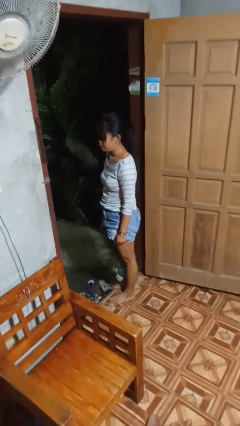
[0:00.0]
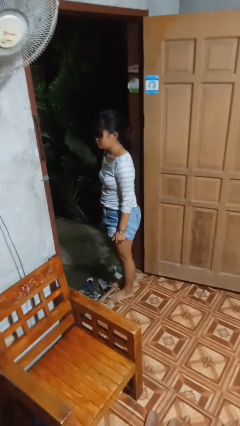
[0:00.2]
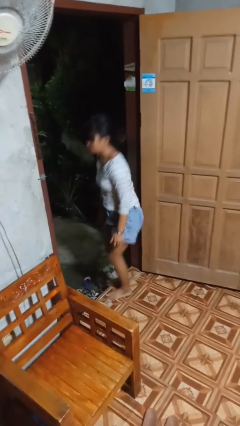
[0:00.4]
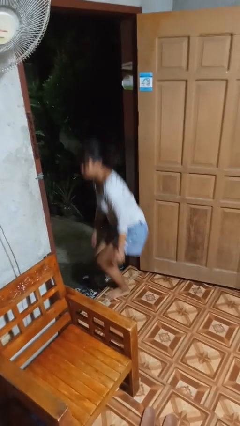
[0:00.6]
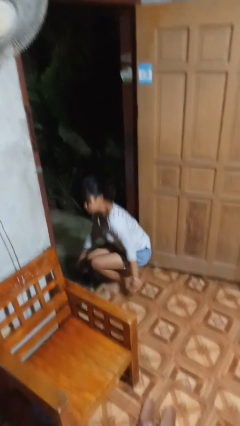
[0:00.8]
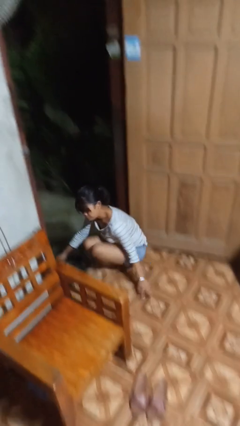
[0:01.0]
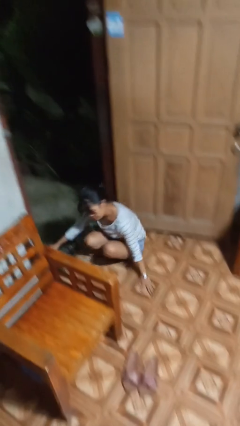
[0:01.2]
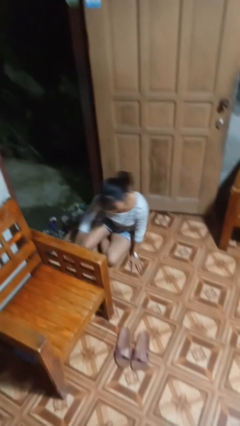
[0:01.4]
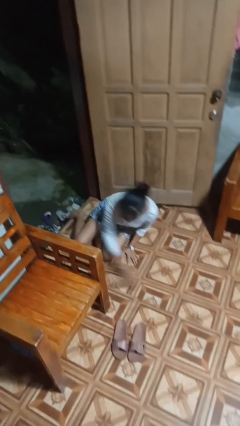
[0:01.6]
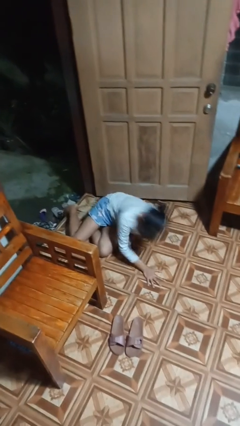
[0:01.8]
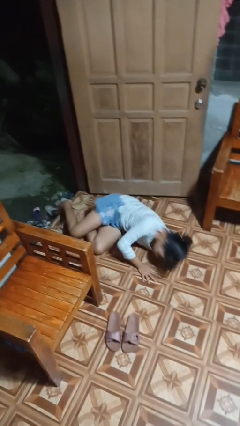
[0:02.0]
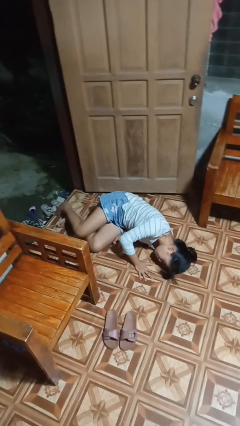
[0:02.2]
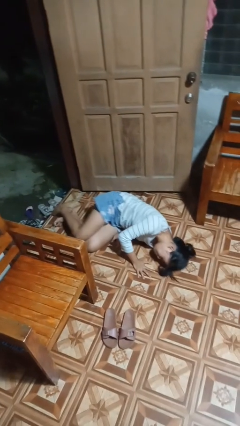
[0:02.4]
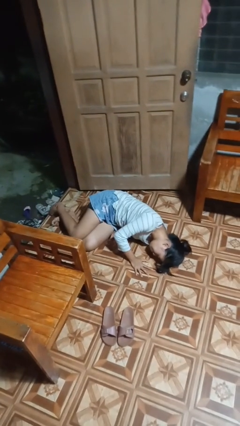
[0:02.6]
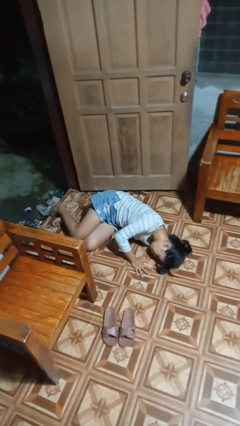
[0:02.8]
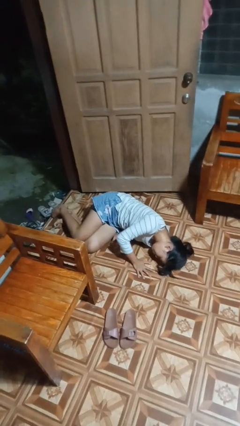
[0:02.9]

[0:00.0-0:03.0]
person falls while standing

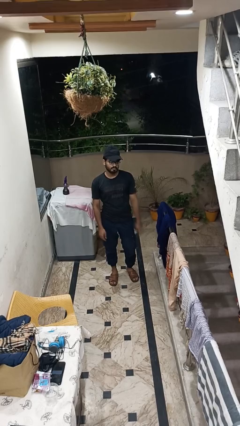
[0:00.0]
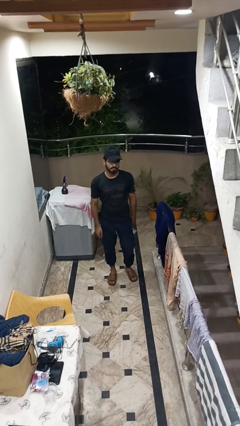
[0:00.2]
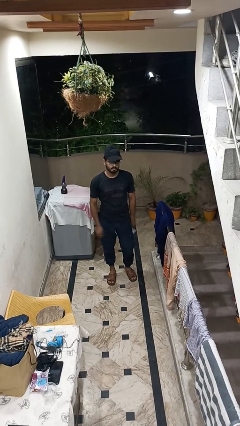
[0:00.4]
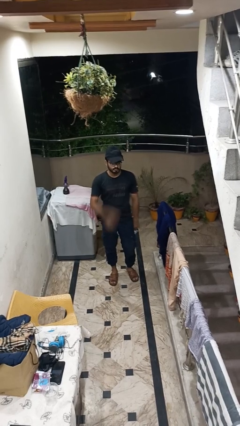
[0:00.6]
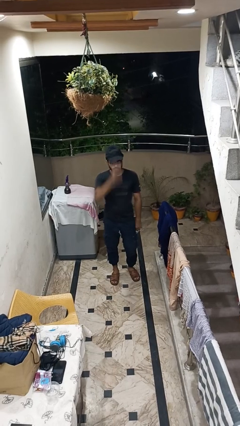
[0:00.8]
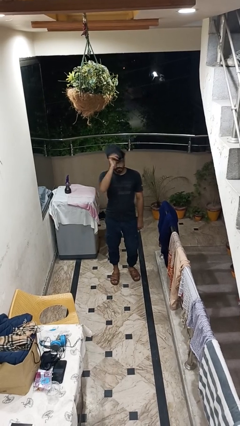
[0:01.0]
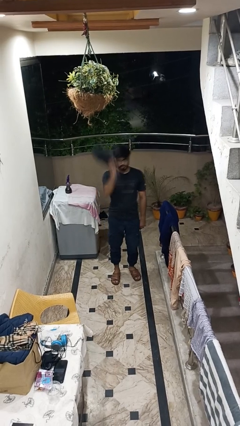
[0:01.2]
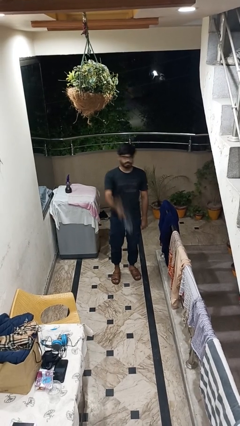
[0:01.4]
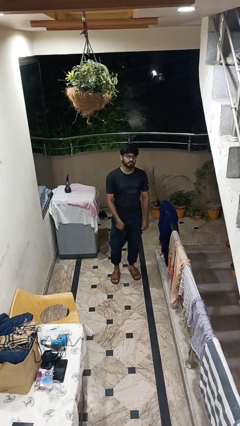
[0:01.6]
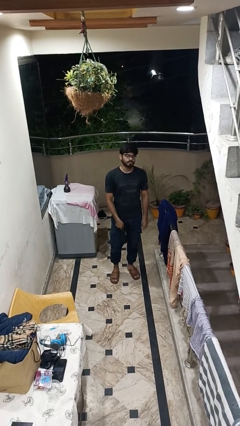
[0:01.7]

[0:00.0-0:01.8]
person takes off hat

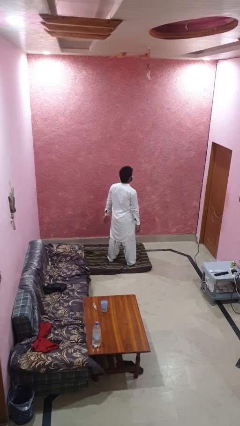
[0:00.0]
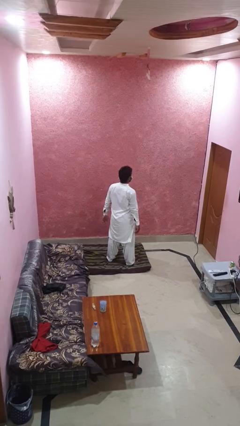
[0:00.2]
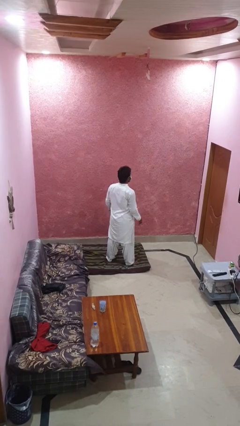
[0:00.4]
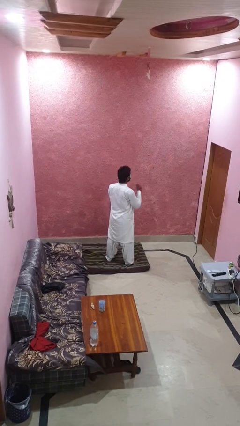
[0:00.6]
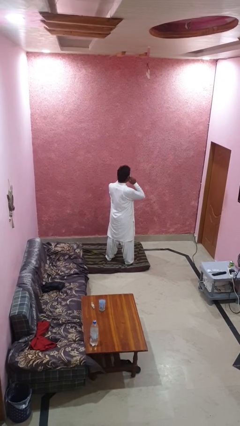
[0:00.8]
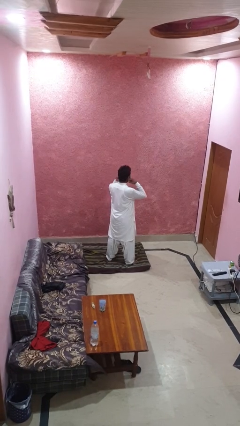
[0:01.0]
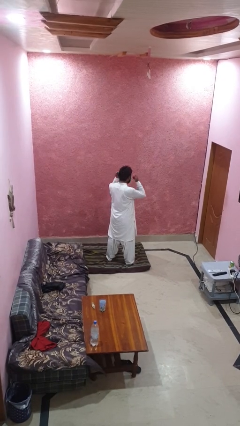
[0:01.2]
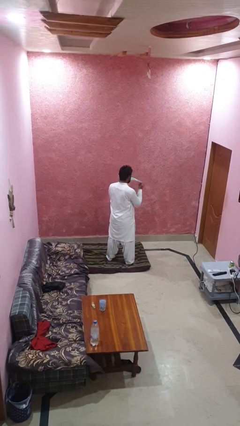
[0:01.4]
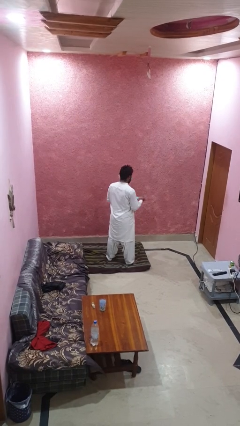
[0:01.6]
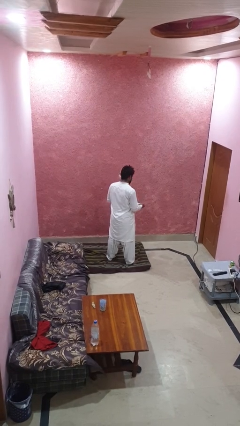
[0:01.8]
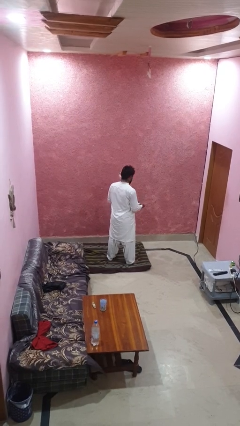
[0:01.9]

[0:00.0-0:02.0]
person takes off facemask

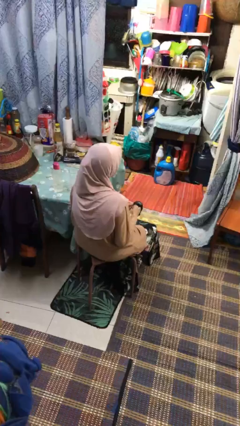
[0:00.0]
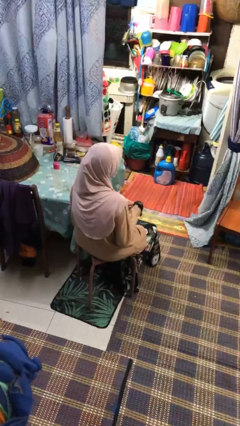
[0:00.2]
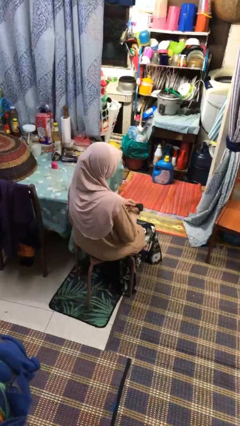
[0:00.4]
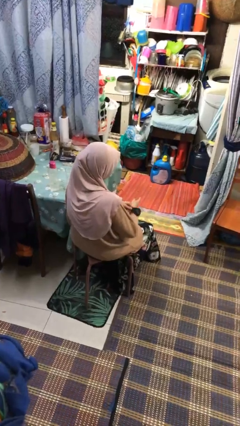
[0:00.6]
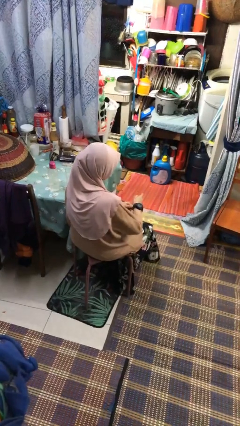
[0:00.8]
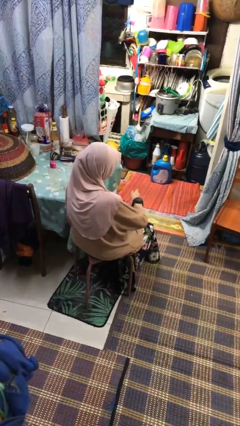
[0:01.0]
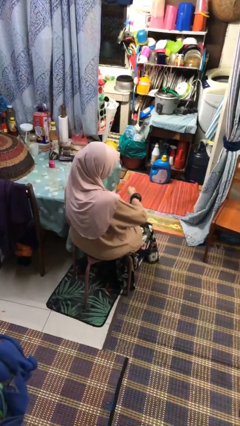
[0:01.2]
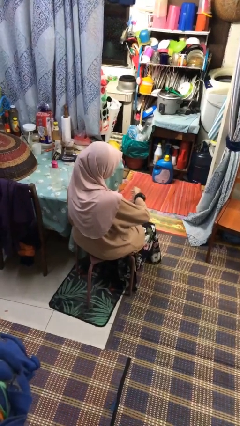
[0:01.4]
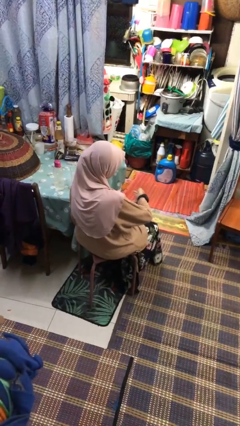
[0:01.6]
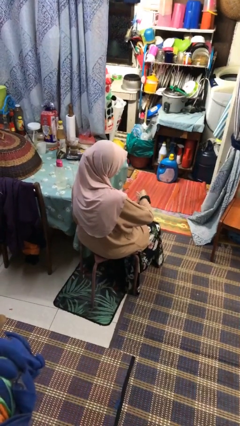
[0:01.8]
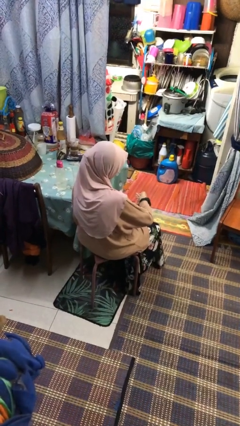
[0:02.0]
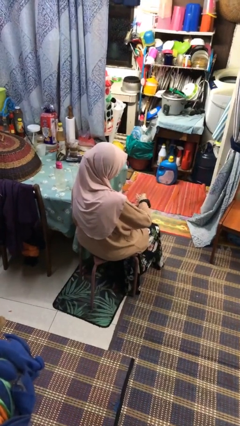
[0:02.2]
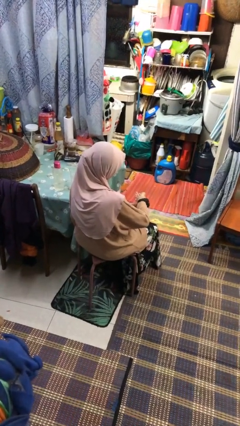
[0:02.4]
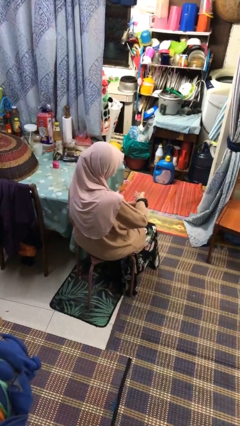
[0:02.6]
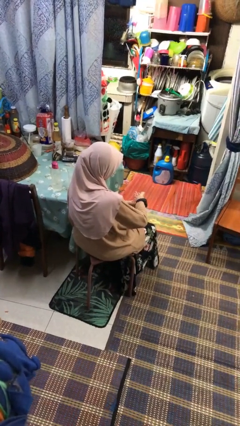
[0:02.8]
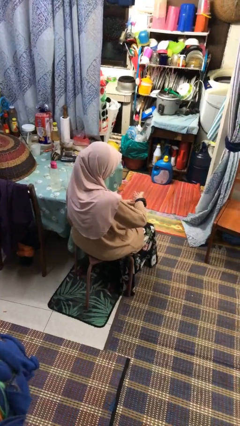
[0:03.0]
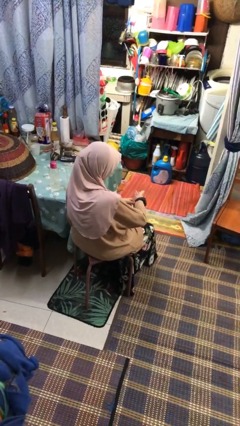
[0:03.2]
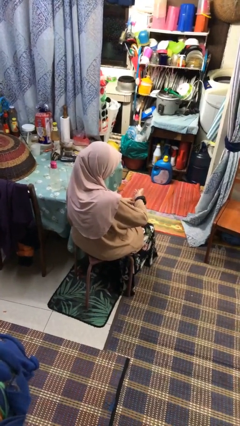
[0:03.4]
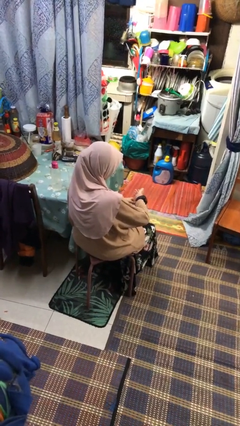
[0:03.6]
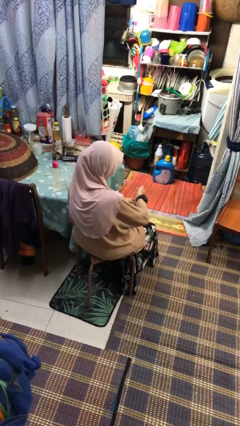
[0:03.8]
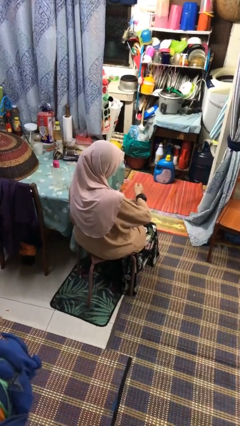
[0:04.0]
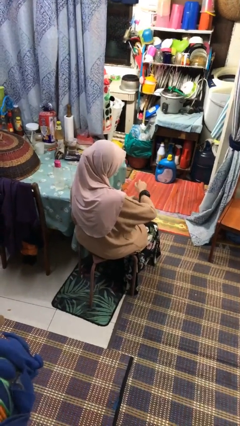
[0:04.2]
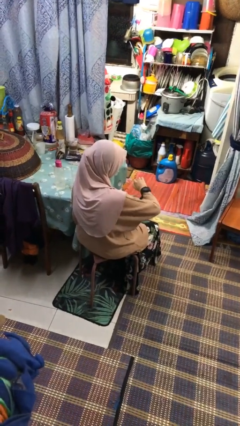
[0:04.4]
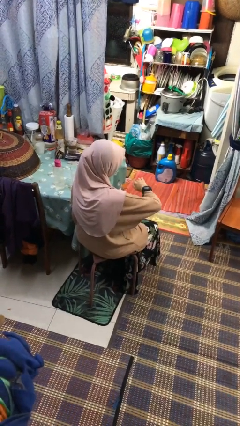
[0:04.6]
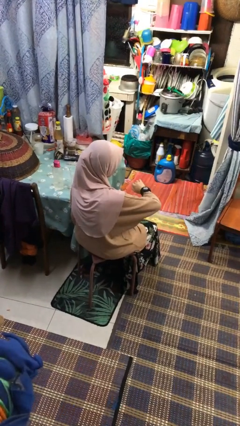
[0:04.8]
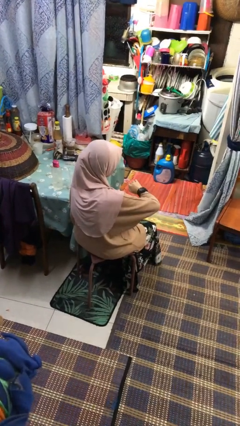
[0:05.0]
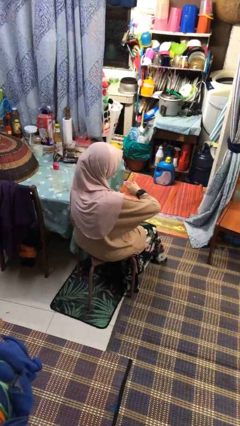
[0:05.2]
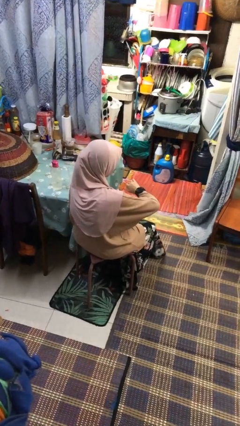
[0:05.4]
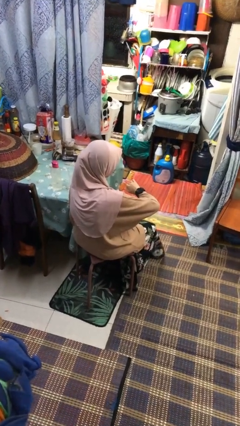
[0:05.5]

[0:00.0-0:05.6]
person puts on wristwatch

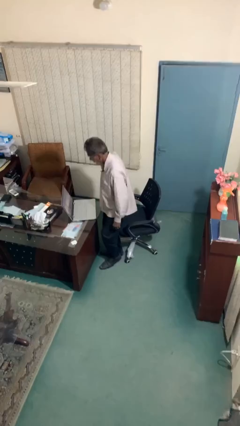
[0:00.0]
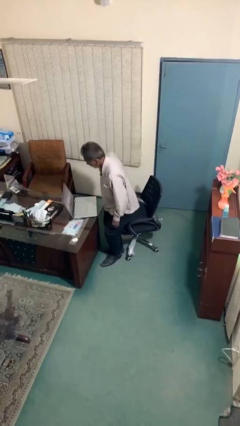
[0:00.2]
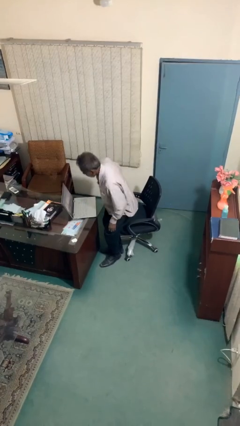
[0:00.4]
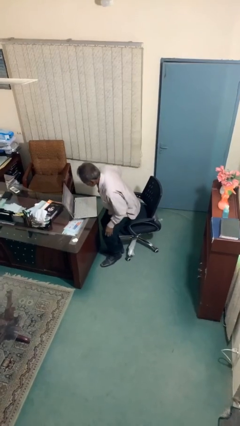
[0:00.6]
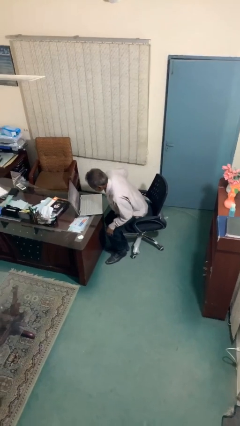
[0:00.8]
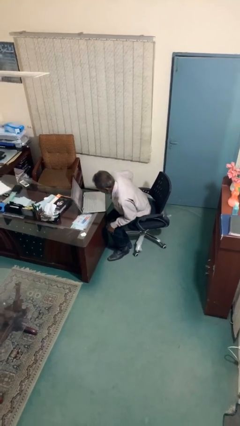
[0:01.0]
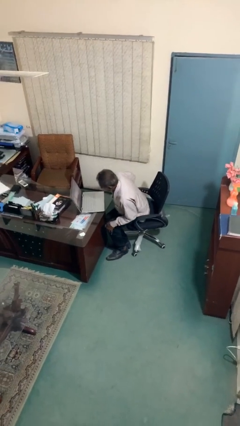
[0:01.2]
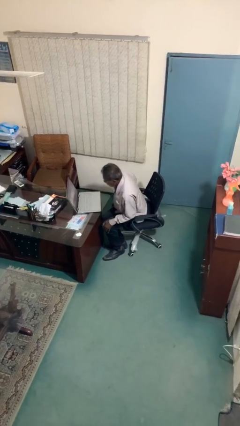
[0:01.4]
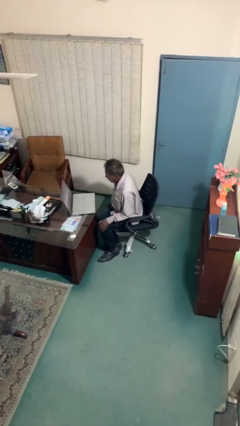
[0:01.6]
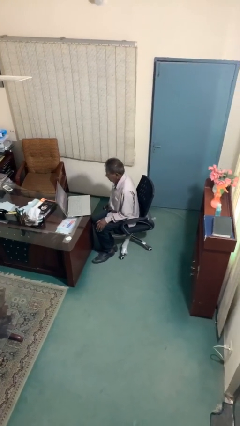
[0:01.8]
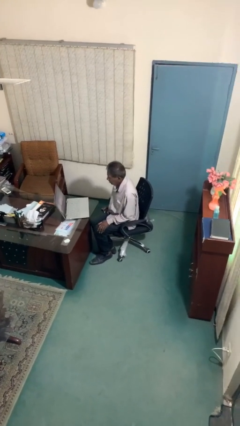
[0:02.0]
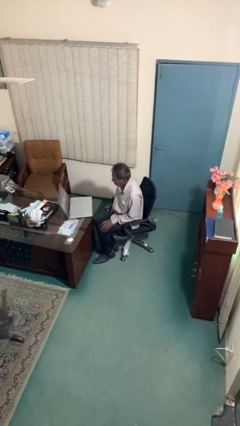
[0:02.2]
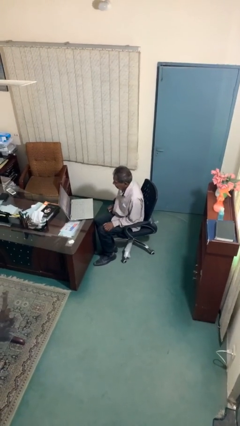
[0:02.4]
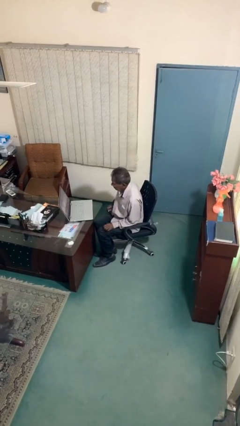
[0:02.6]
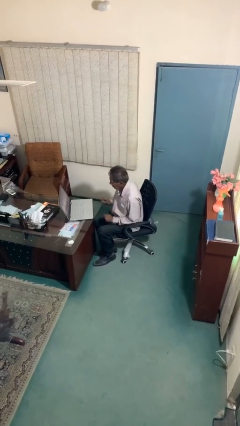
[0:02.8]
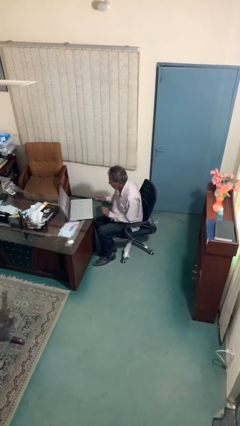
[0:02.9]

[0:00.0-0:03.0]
person sits down

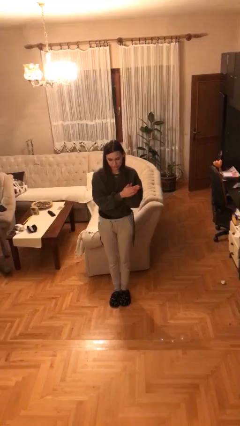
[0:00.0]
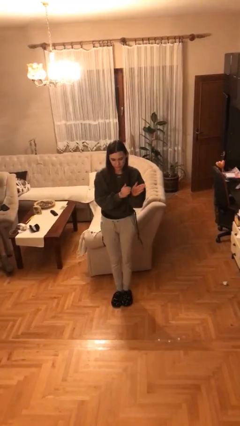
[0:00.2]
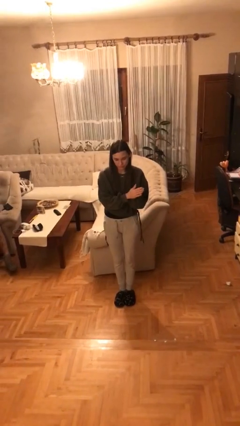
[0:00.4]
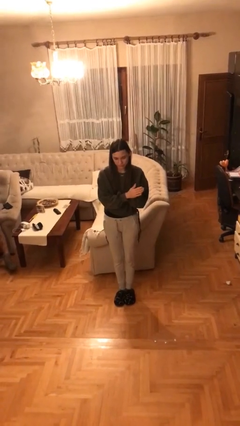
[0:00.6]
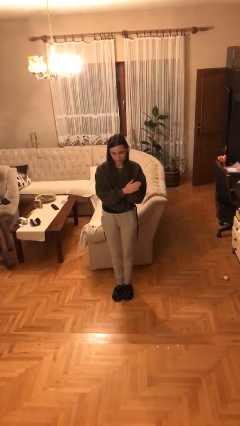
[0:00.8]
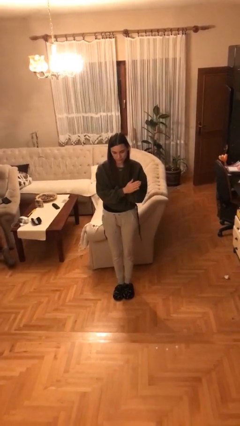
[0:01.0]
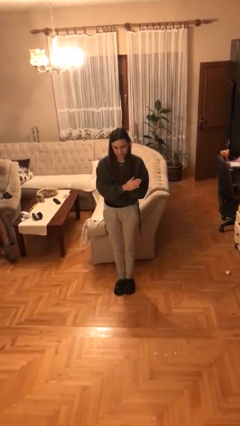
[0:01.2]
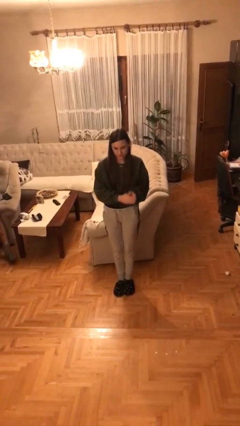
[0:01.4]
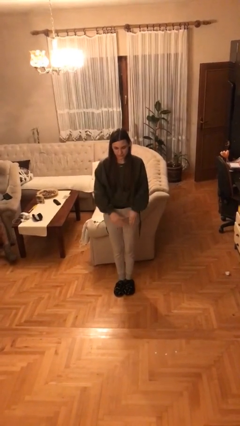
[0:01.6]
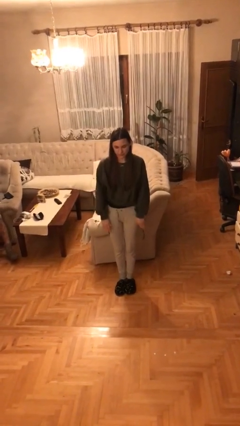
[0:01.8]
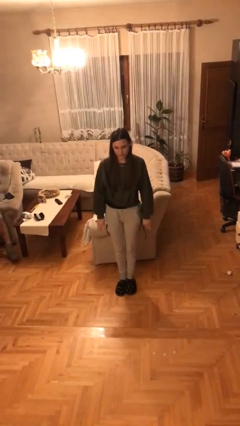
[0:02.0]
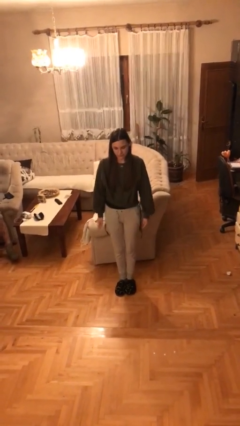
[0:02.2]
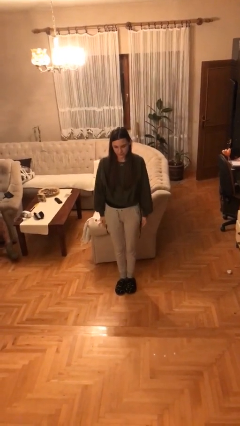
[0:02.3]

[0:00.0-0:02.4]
person claps hands
